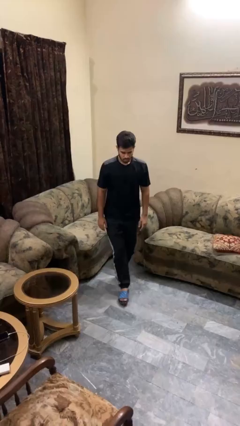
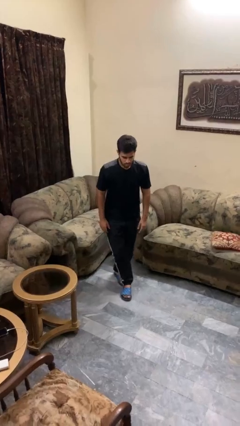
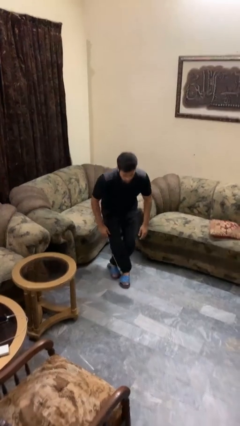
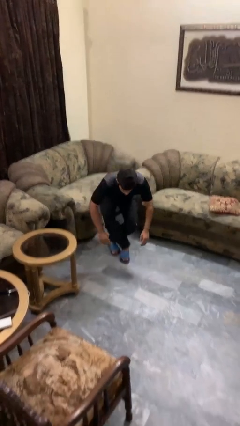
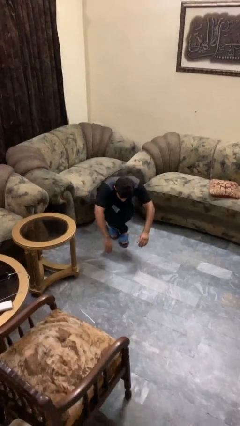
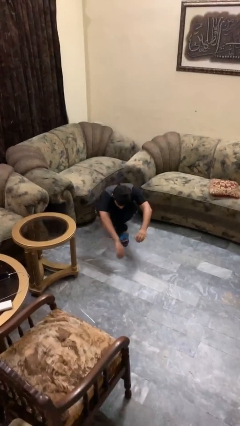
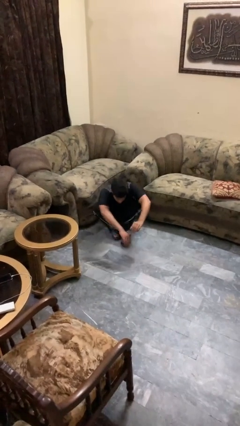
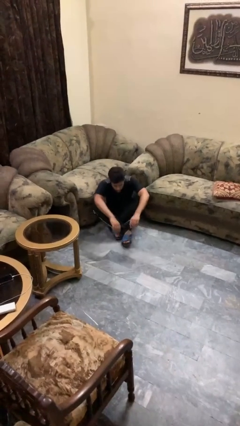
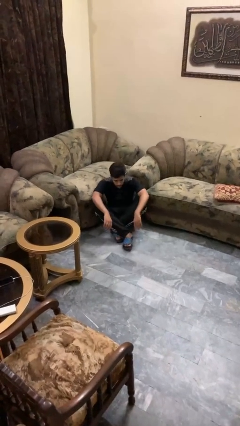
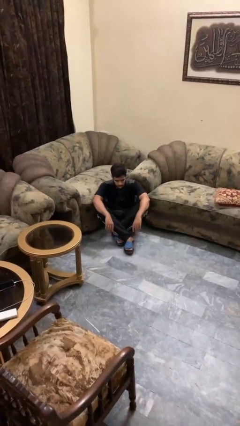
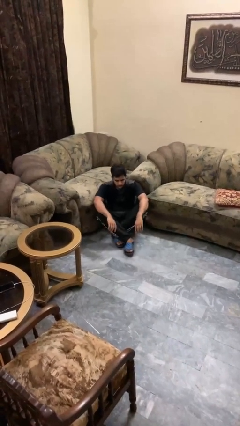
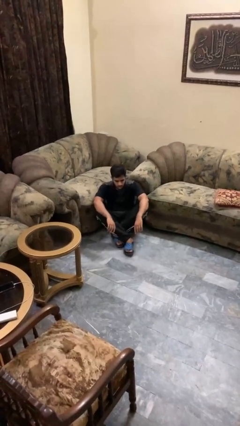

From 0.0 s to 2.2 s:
person sits crisscross

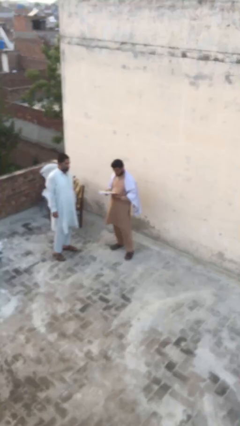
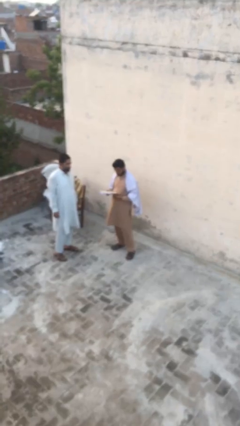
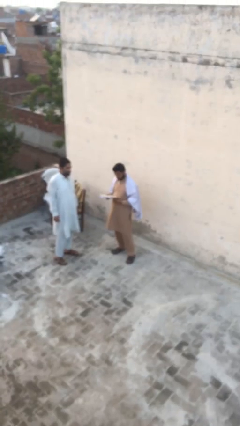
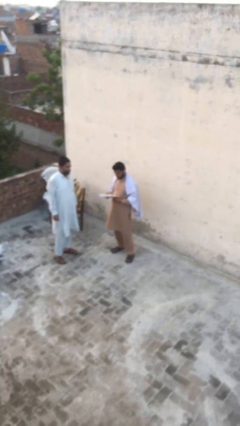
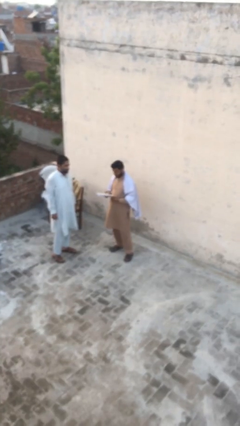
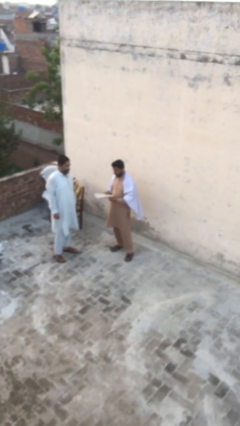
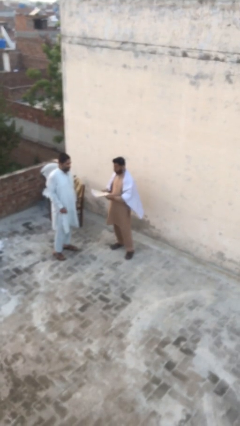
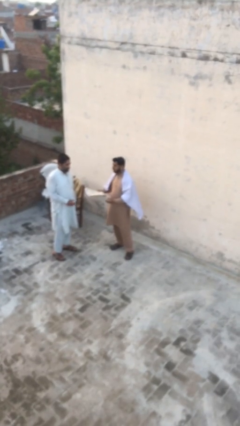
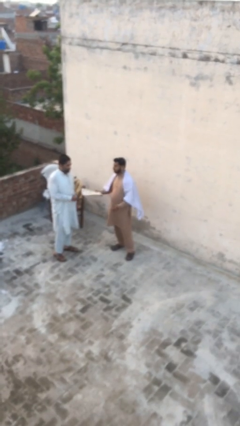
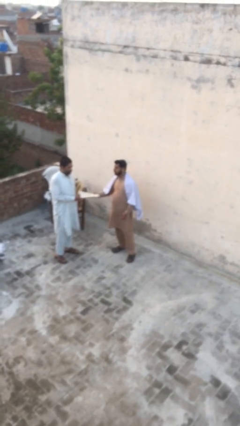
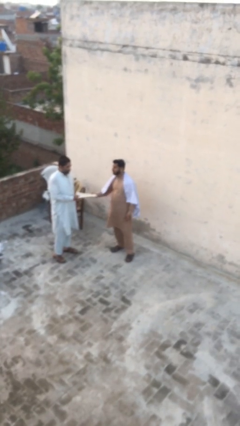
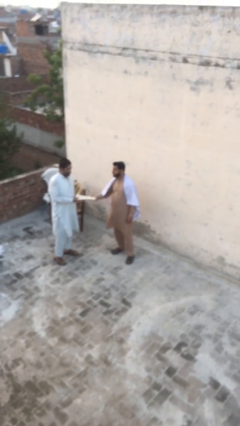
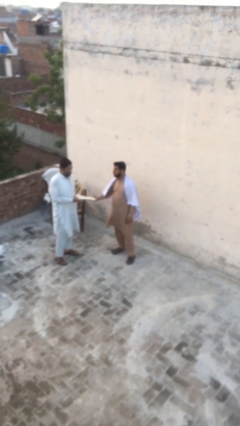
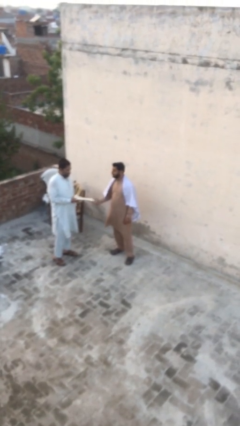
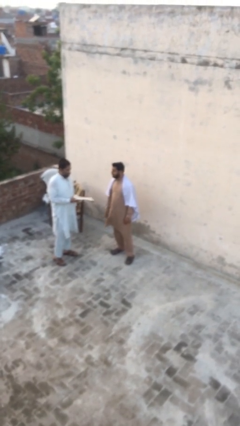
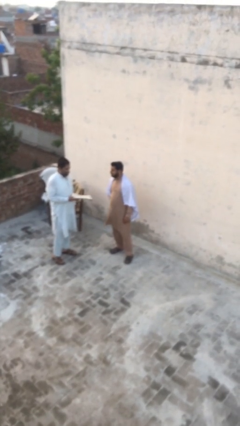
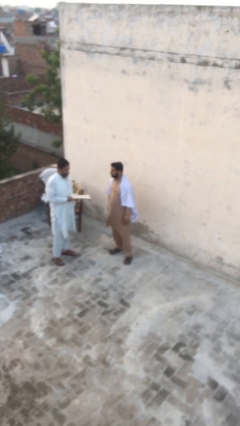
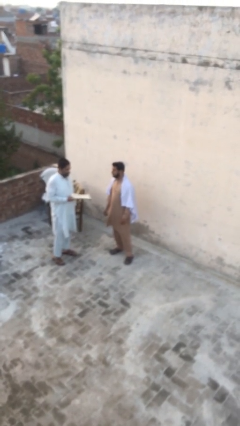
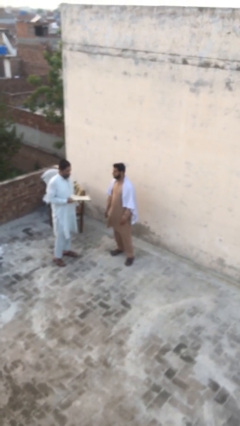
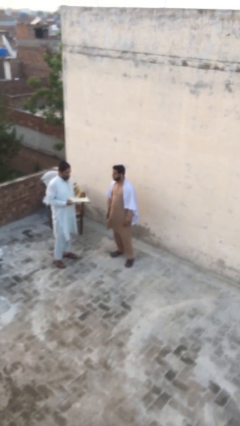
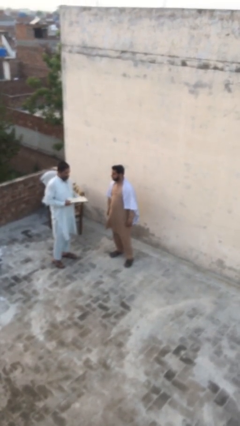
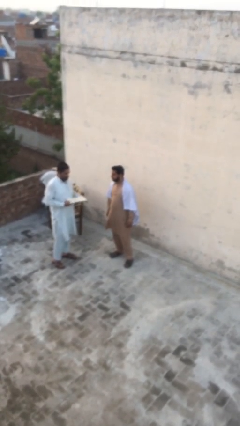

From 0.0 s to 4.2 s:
person transfers object to person

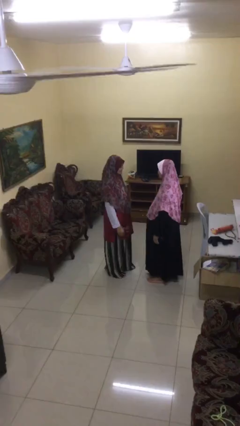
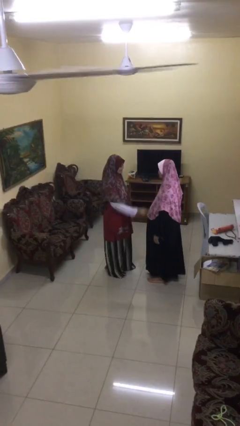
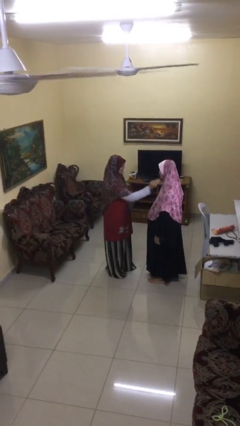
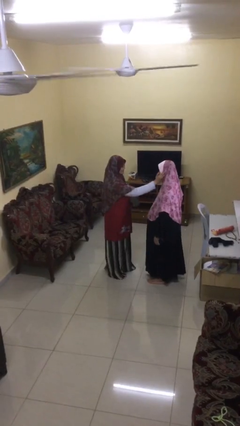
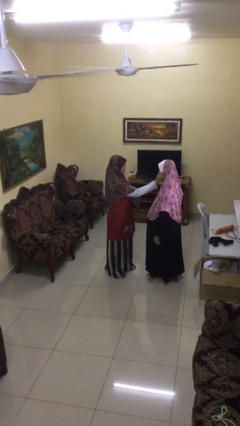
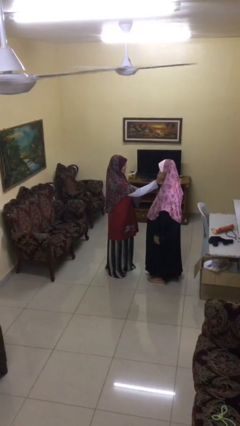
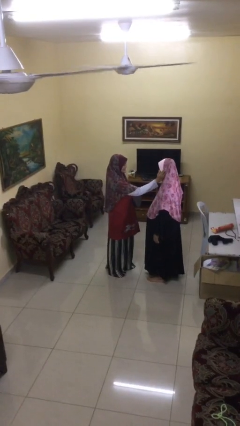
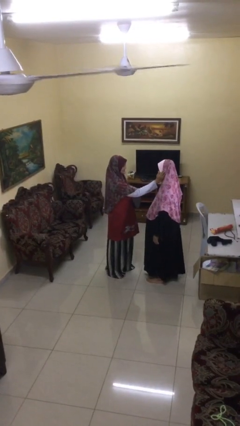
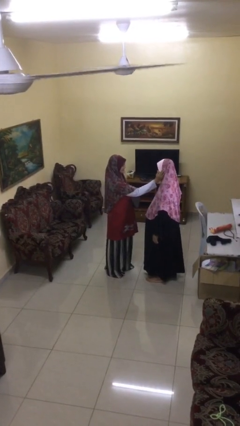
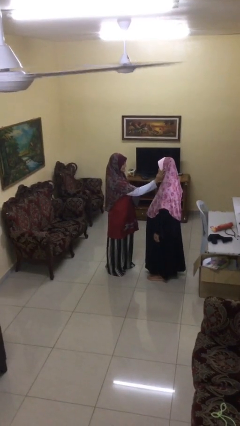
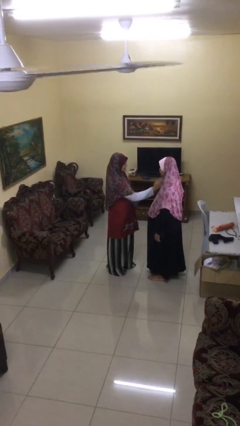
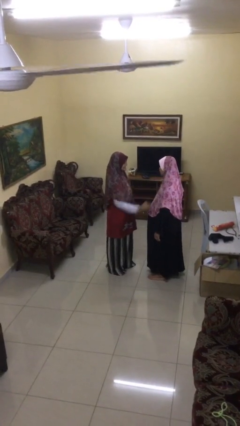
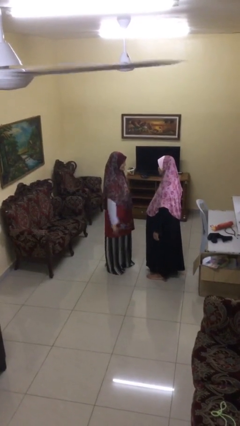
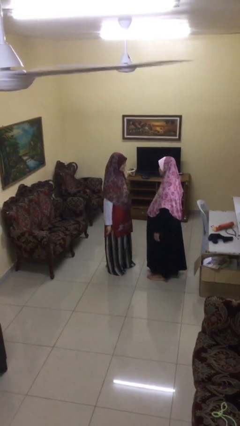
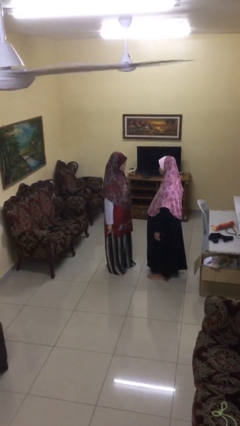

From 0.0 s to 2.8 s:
person touches face of person

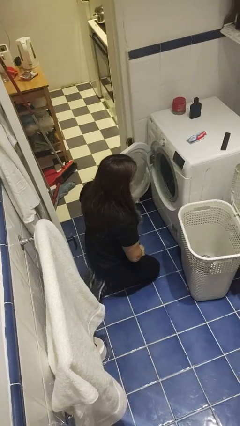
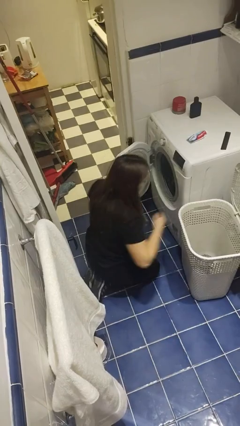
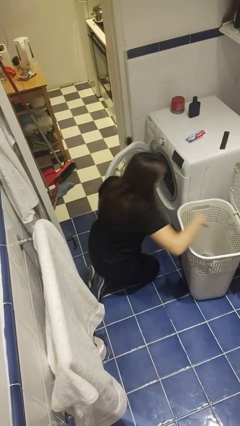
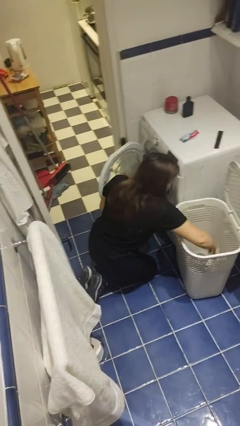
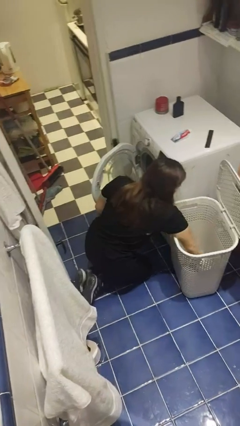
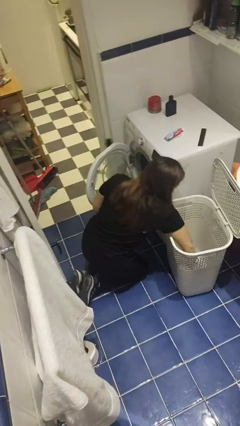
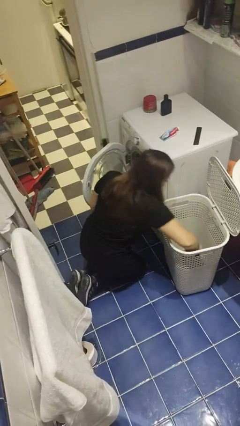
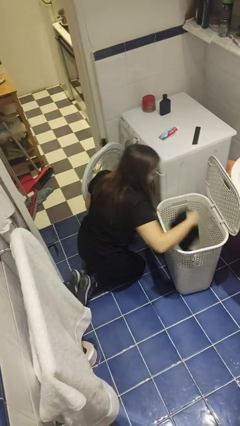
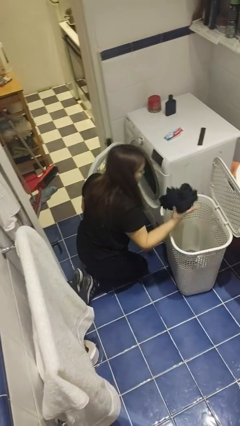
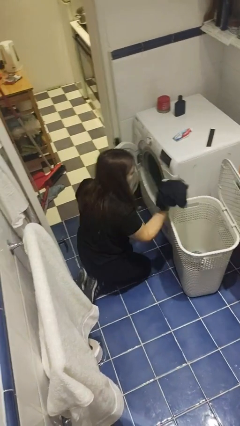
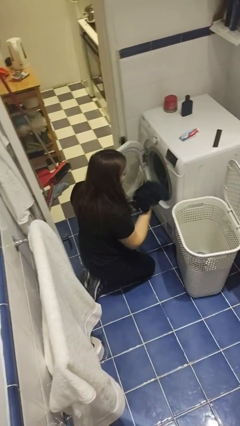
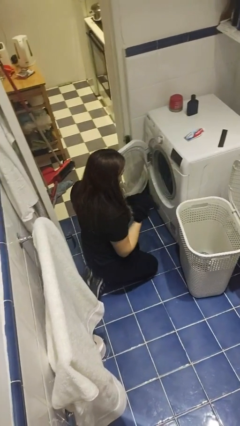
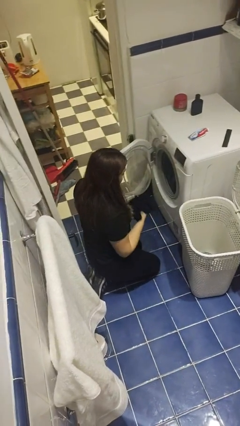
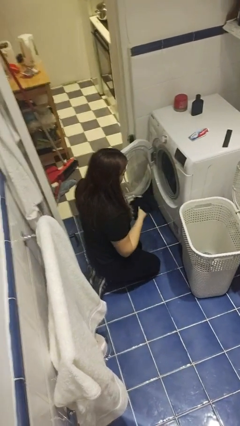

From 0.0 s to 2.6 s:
person unloads clotheswasher

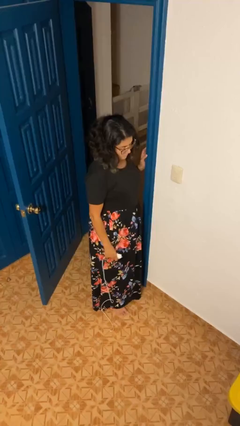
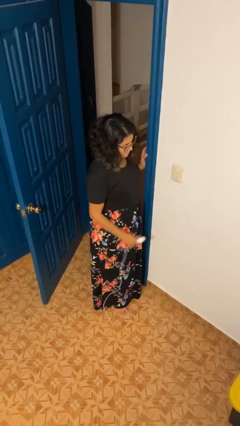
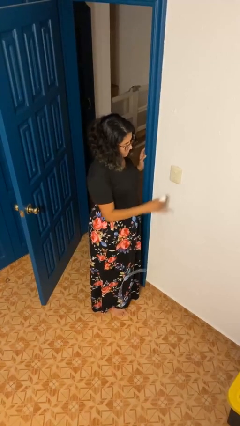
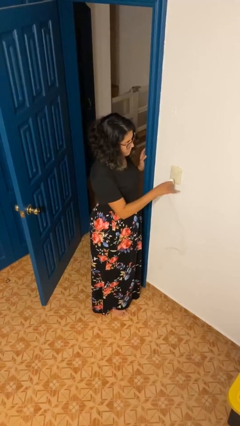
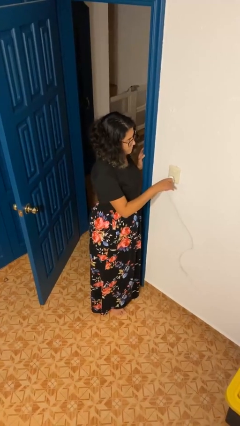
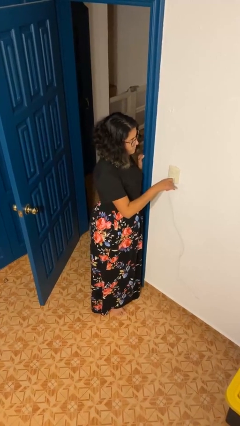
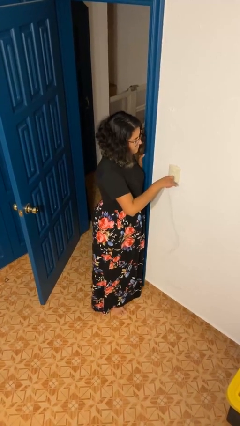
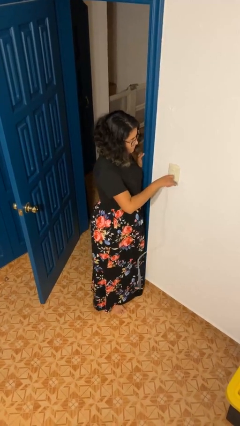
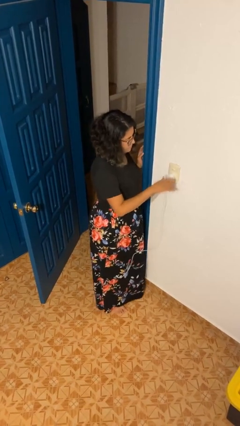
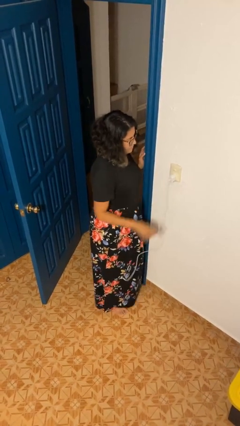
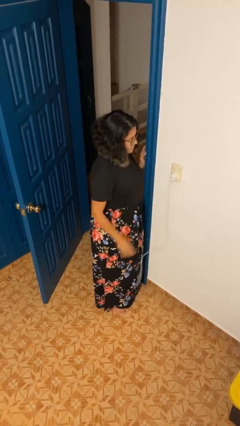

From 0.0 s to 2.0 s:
person plugs into electrical socket

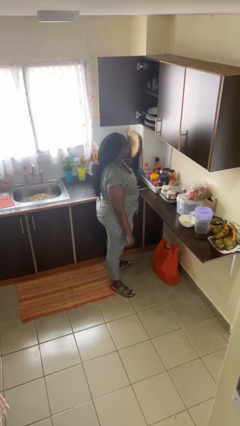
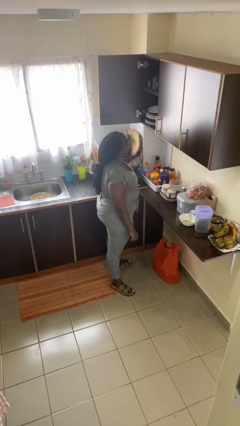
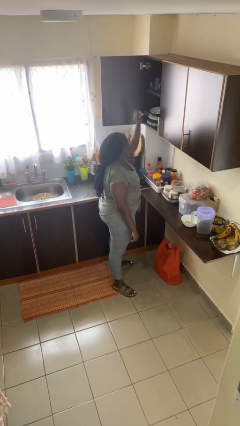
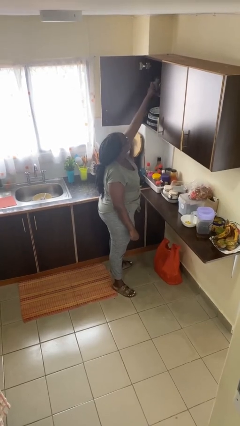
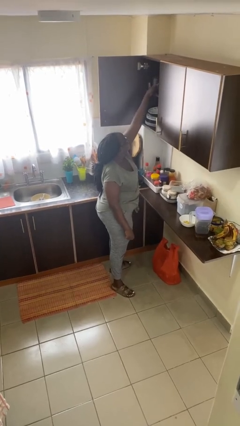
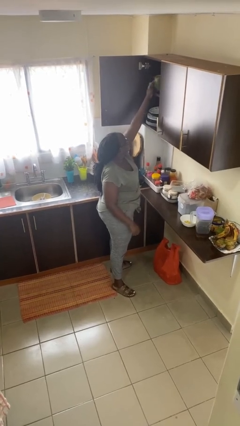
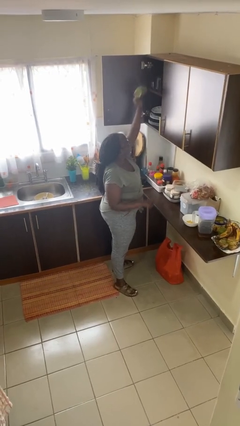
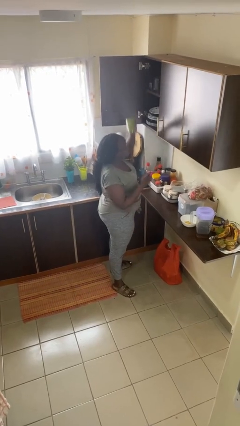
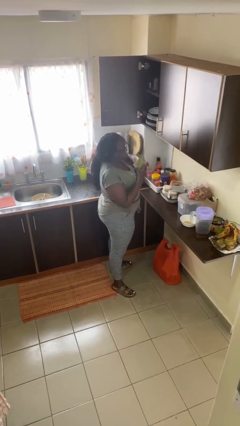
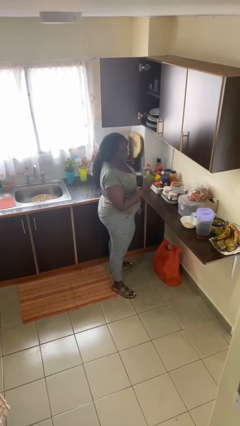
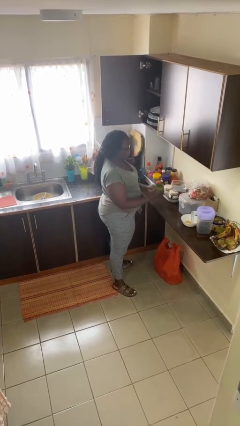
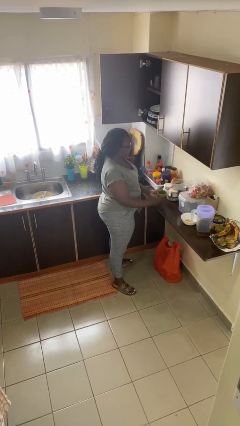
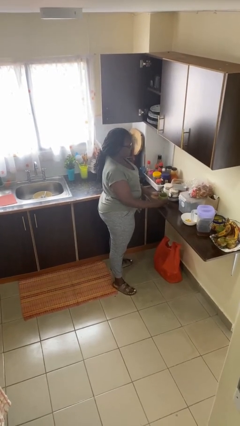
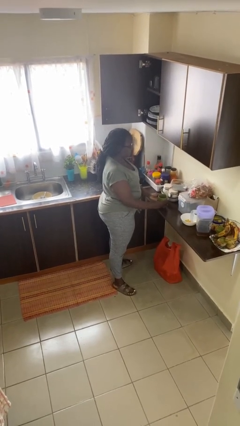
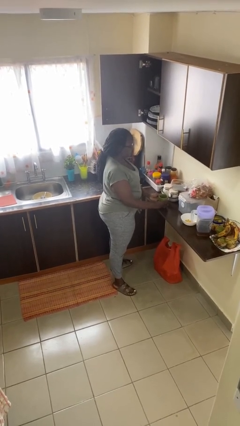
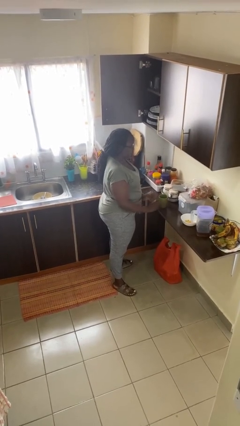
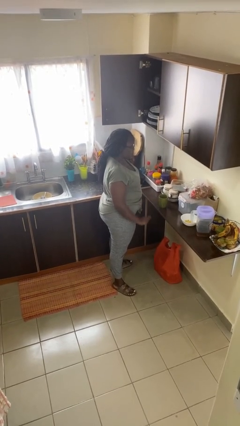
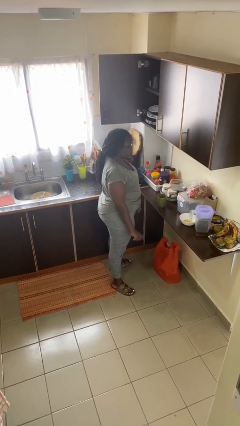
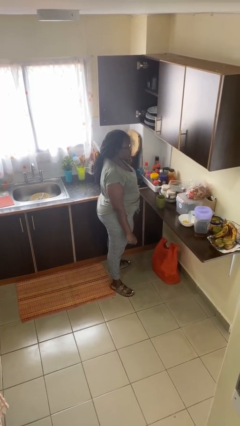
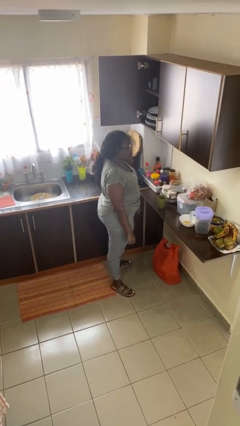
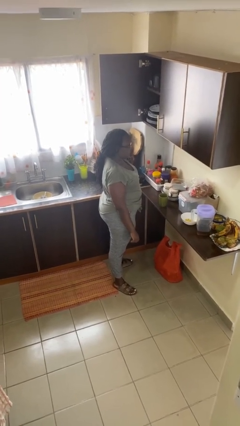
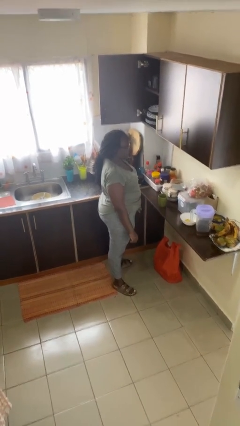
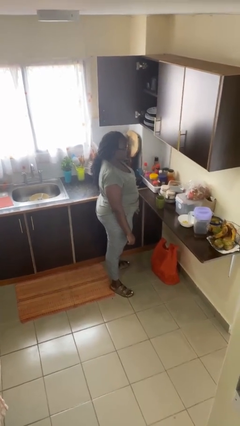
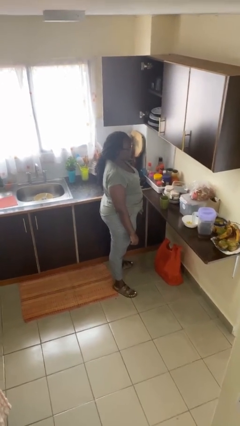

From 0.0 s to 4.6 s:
person takes object from cabinet
